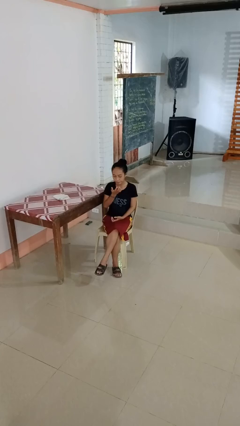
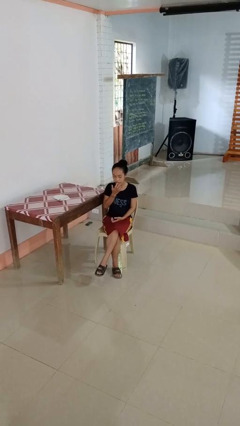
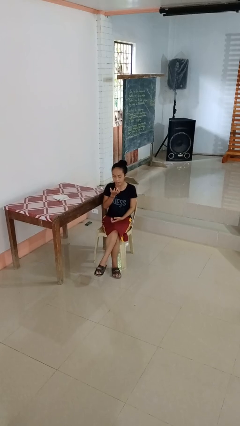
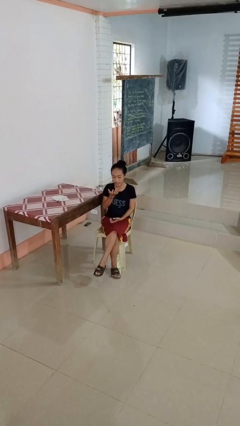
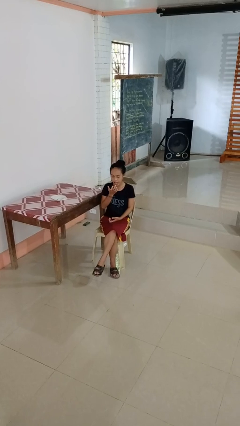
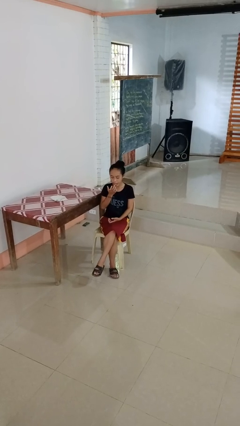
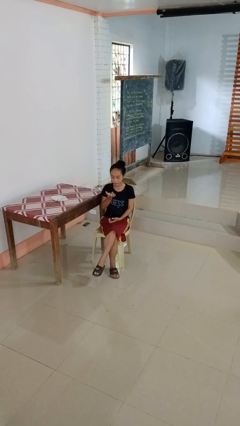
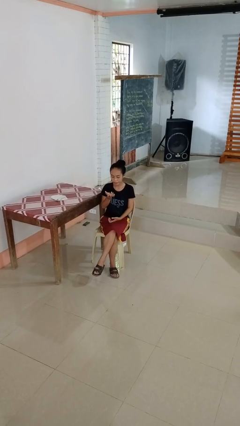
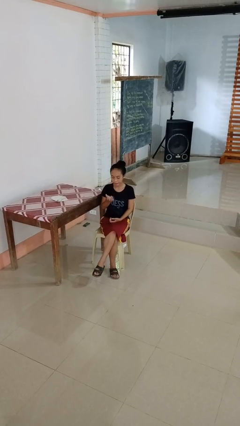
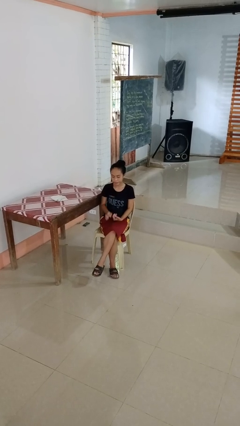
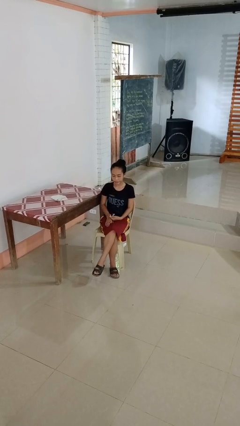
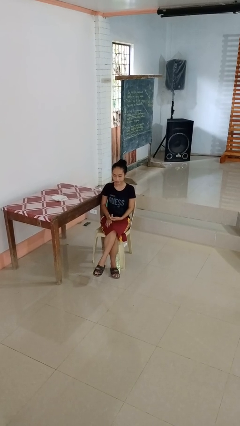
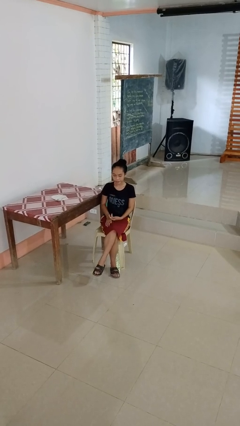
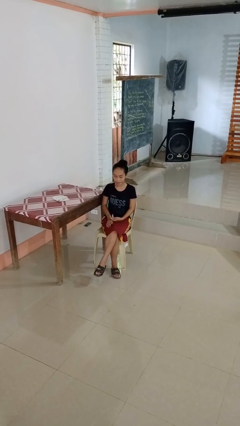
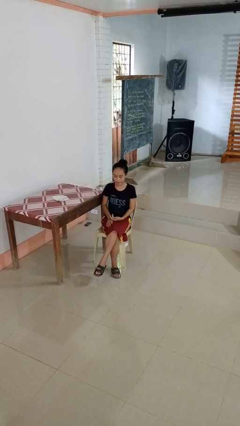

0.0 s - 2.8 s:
person licks fingers

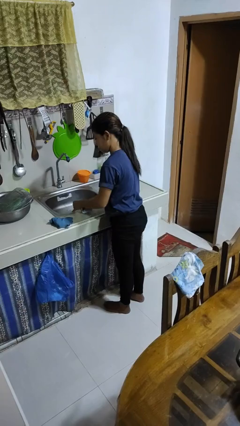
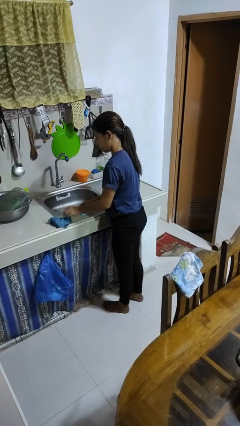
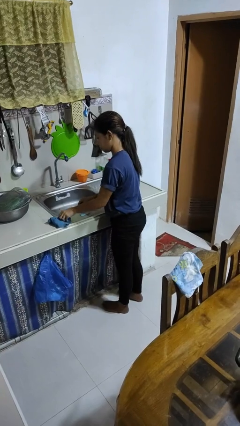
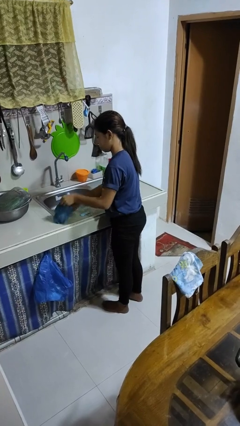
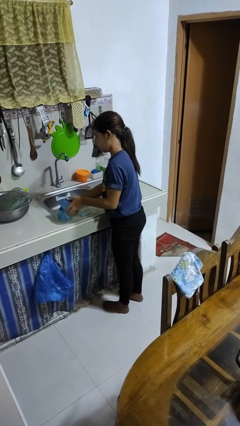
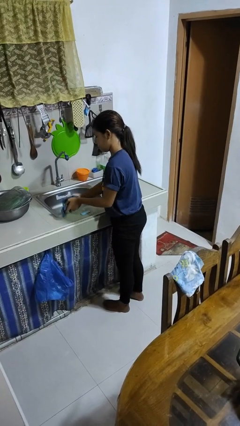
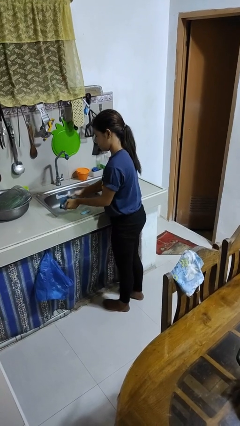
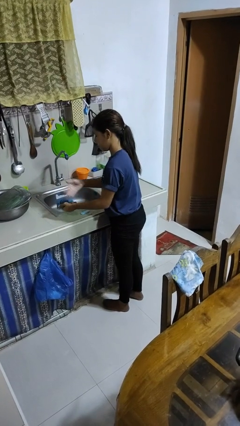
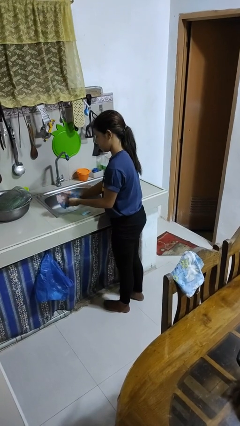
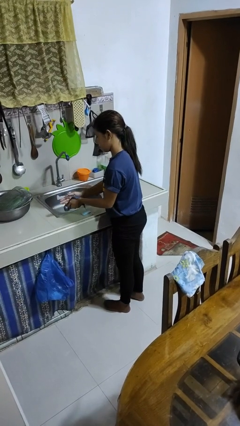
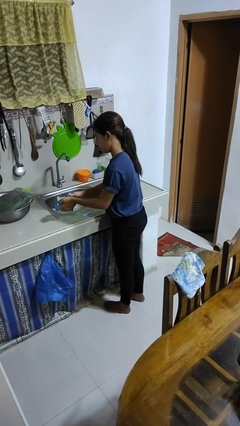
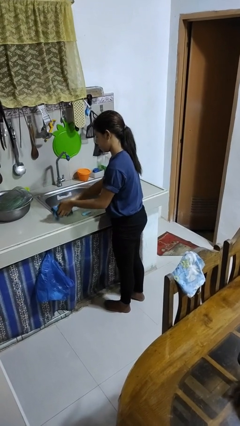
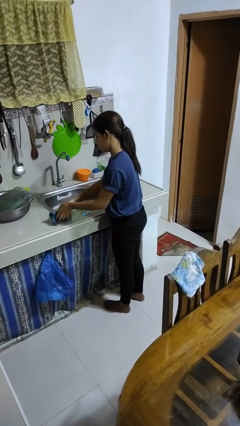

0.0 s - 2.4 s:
person dries hands with towel

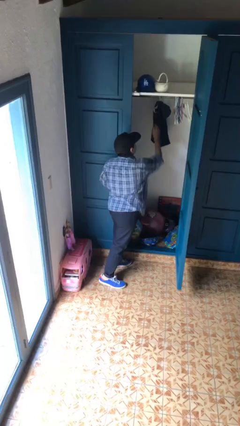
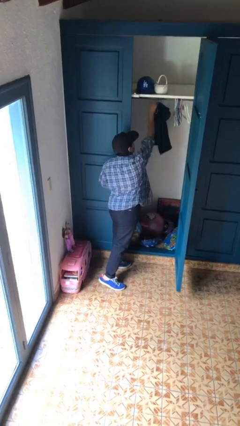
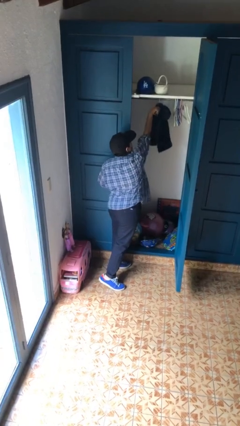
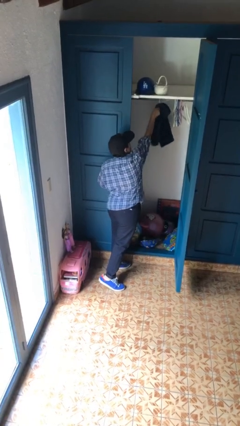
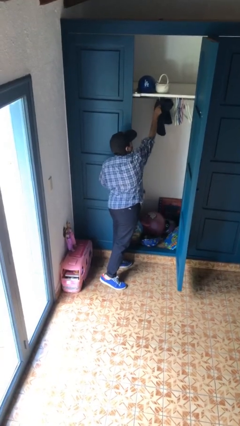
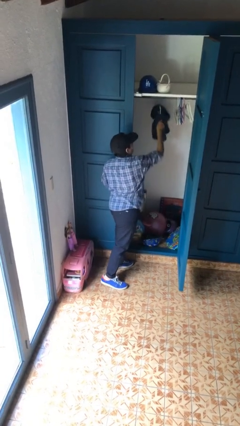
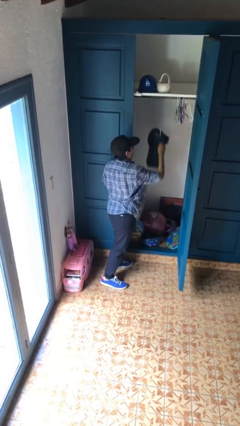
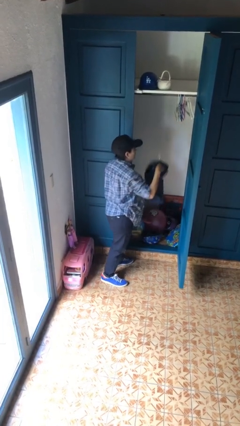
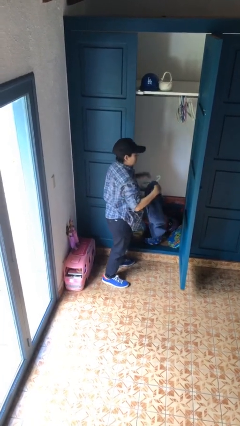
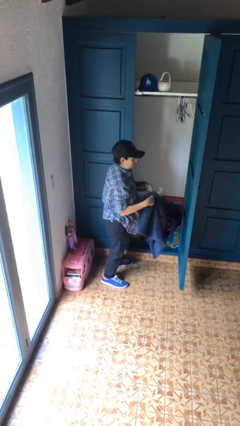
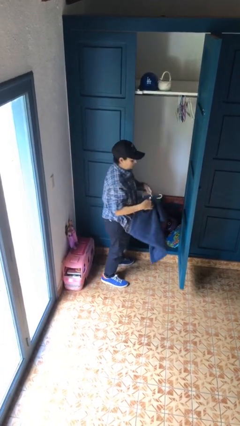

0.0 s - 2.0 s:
person takes clothes from closet

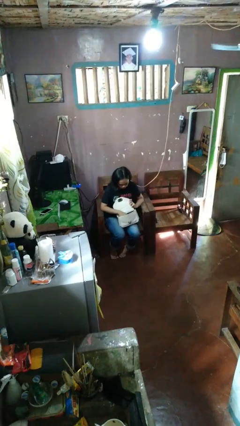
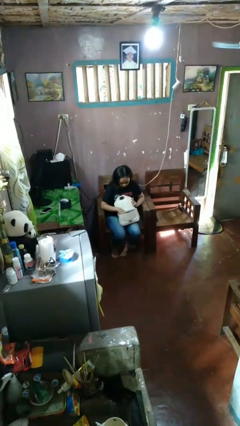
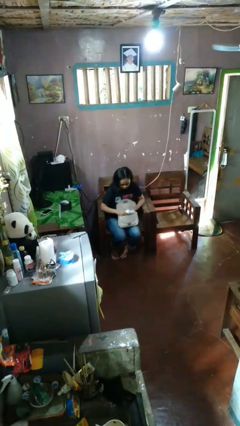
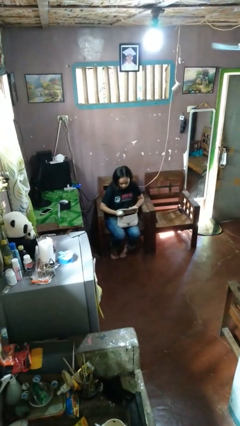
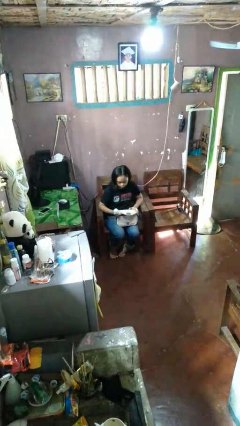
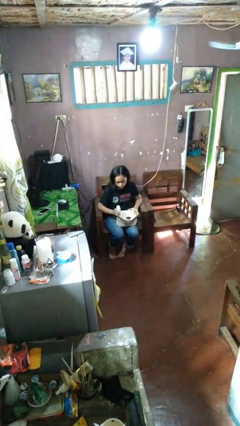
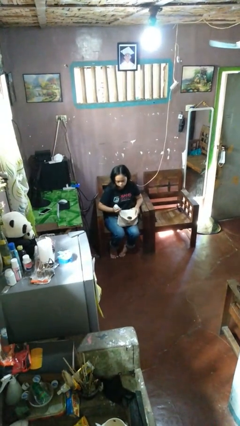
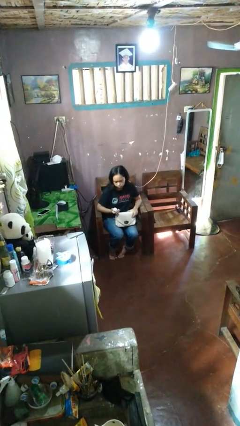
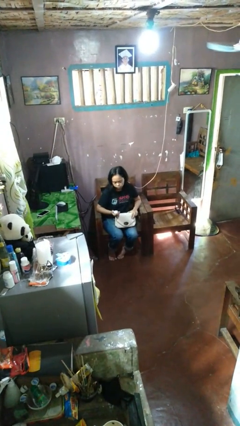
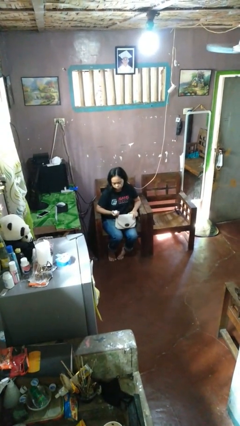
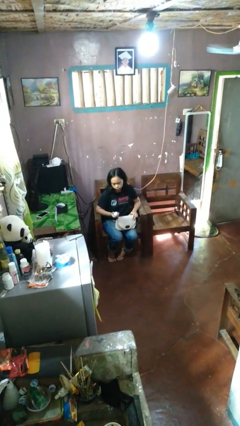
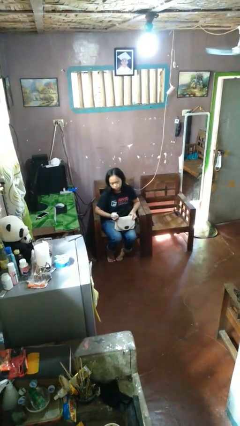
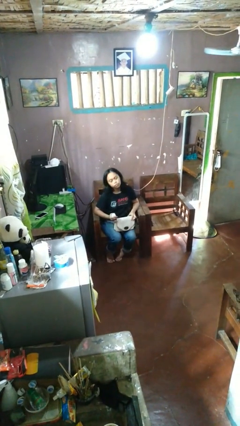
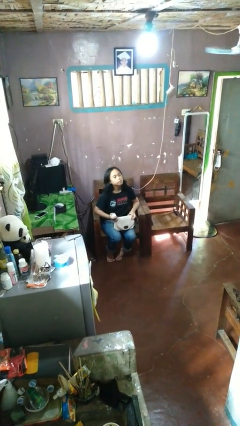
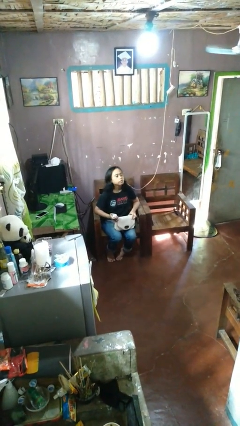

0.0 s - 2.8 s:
person takes object from purse

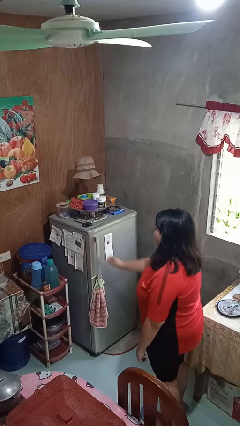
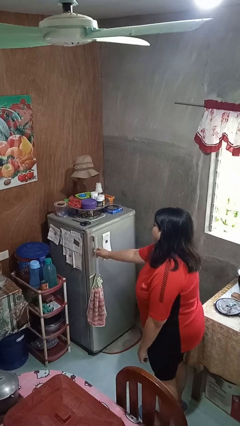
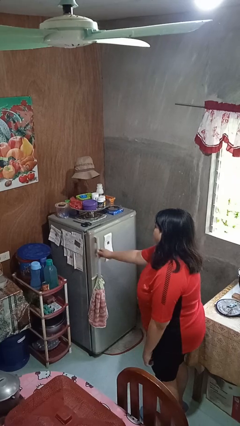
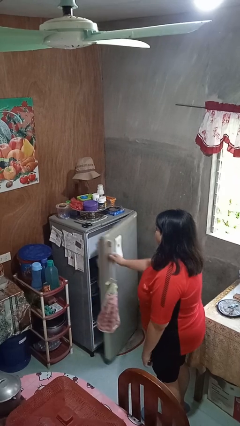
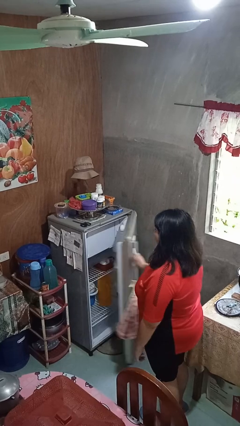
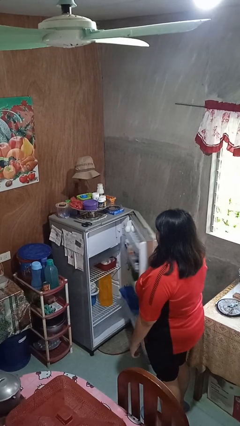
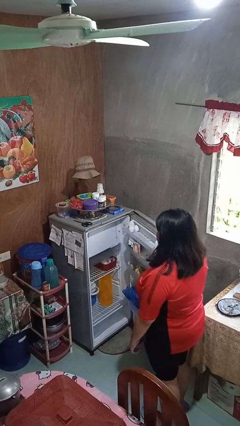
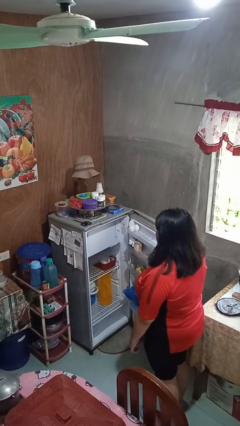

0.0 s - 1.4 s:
person opens refrigerator

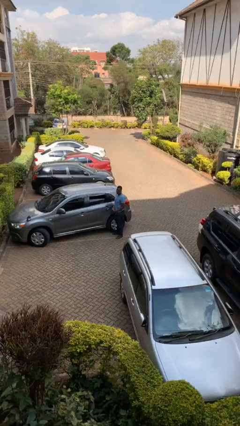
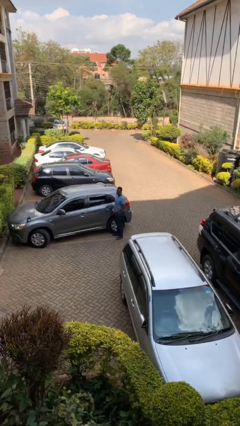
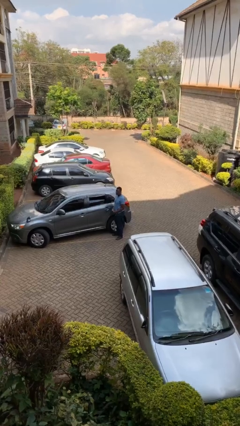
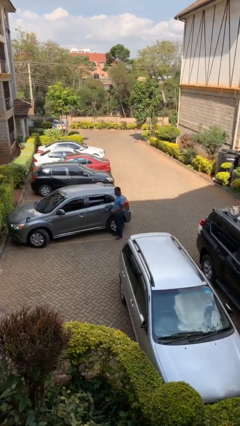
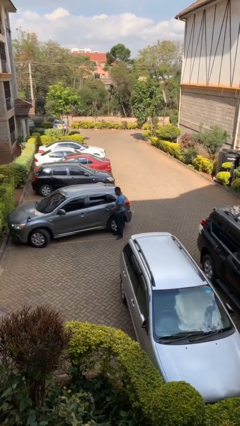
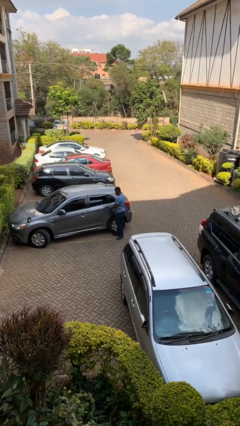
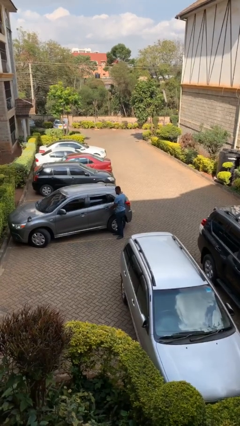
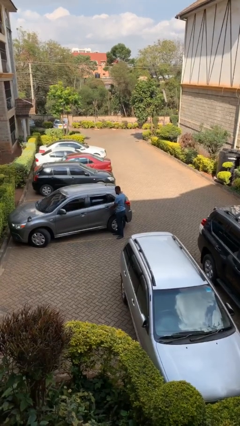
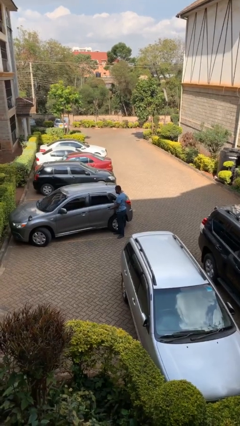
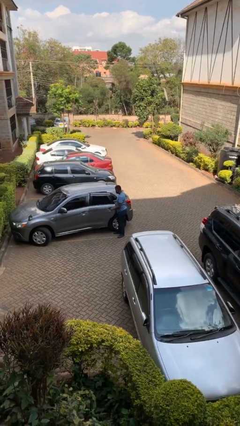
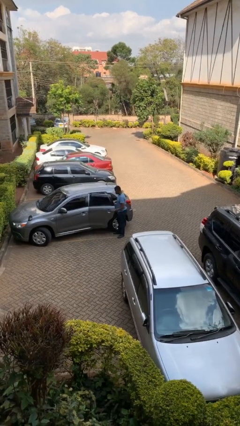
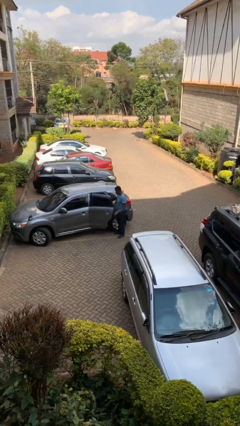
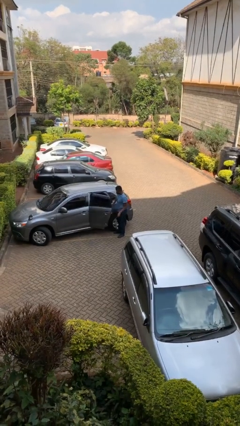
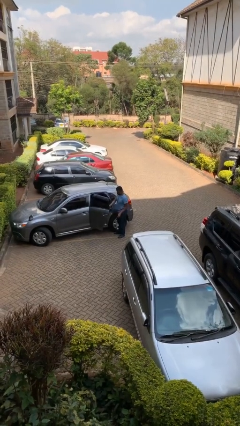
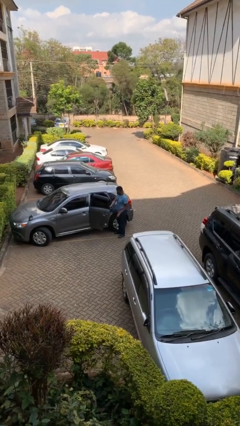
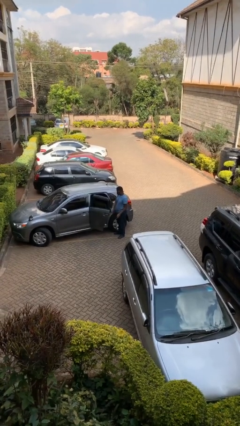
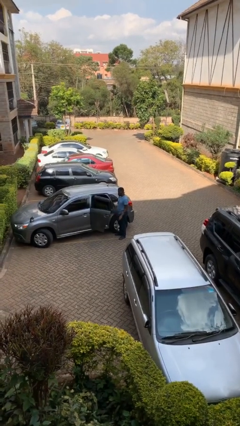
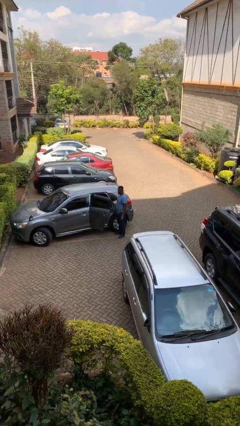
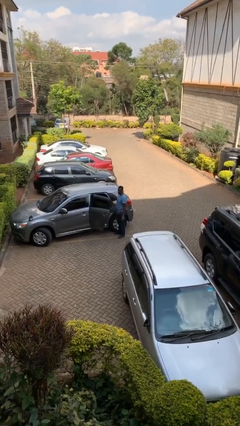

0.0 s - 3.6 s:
person opens car door

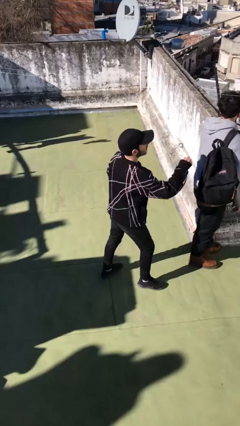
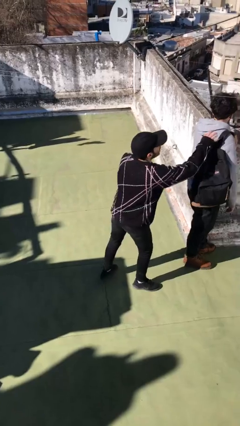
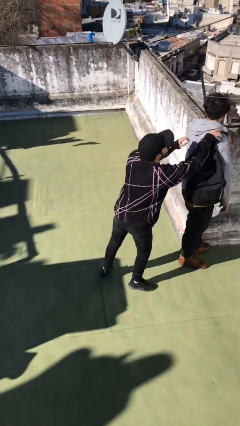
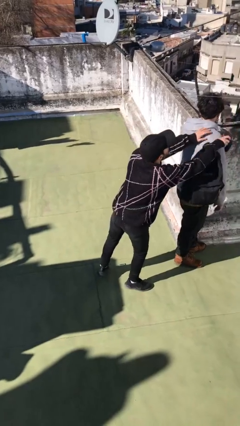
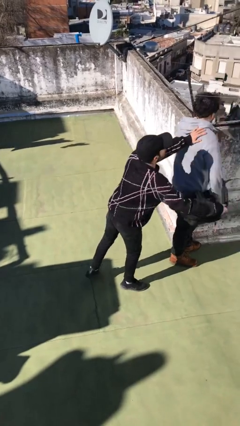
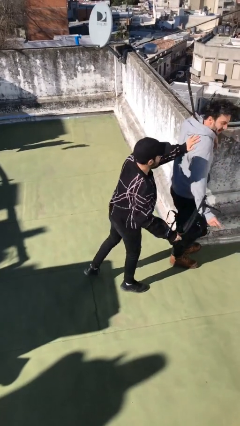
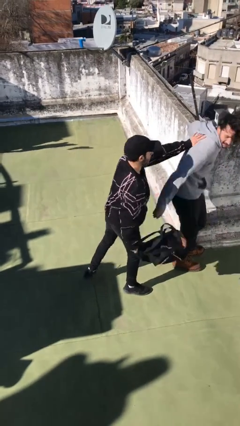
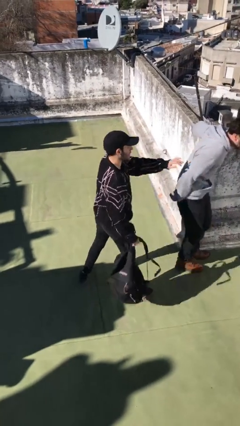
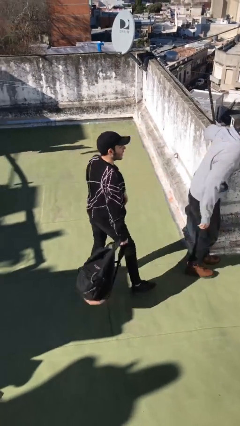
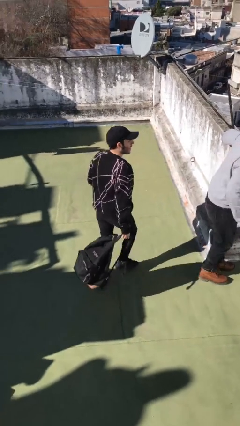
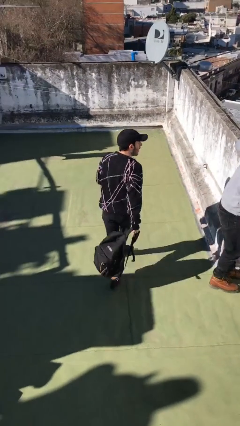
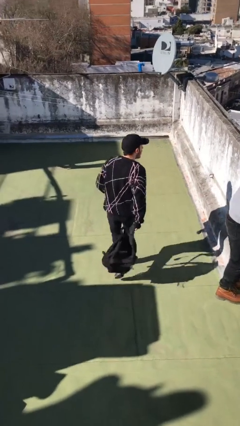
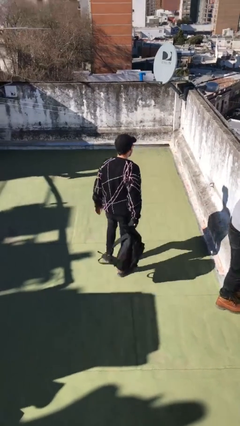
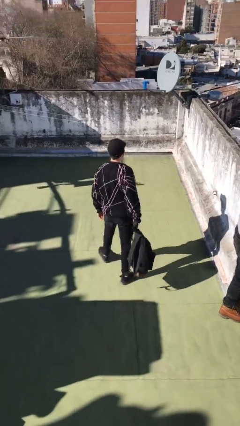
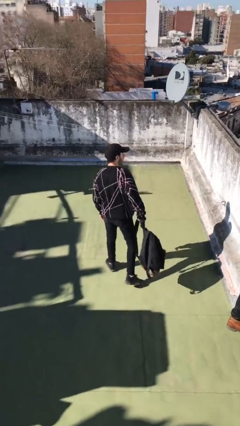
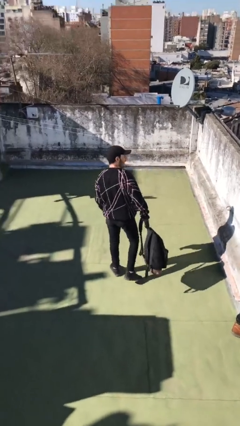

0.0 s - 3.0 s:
person steals object from person
